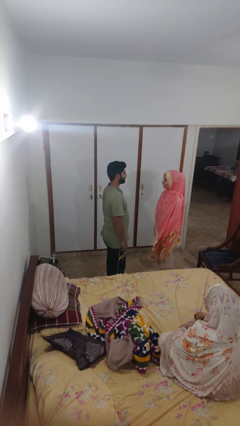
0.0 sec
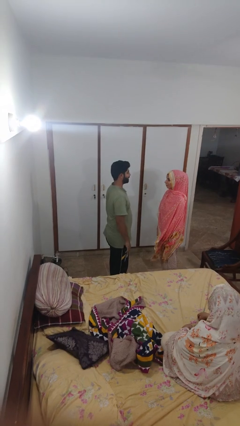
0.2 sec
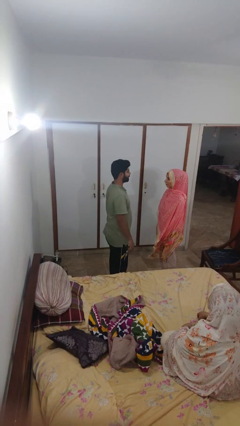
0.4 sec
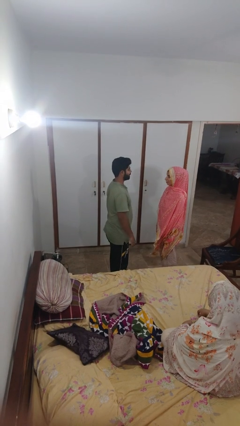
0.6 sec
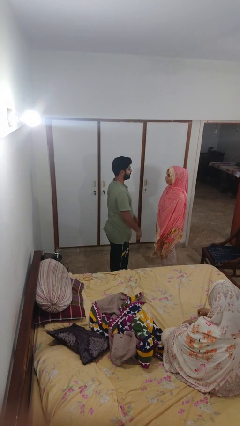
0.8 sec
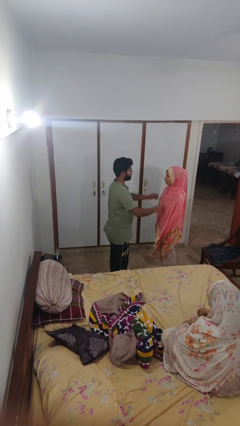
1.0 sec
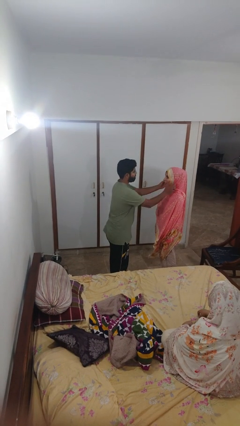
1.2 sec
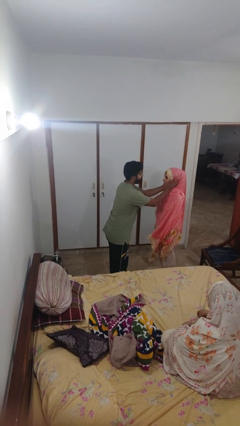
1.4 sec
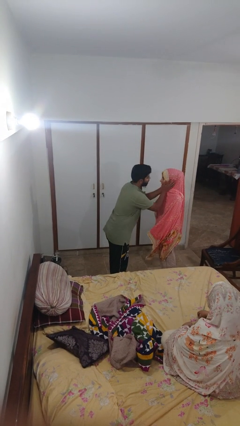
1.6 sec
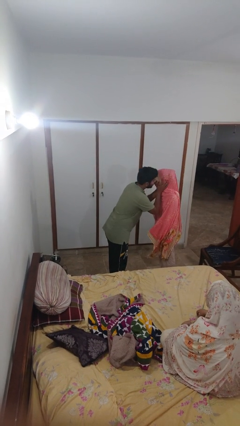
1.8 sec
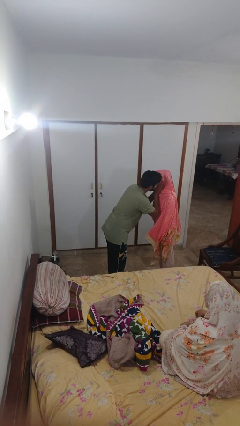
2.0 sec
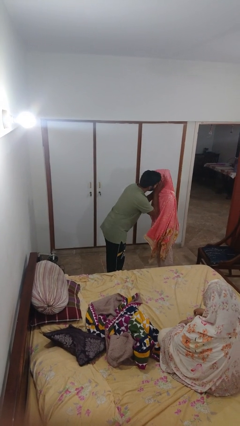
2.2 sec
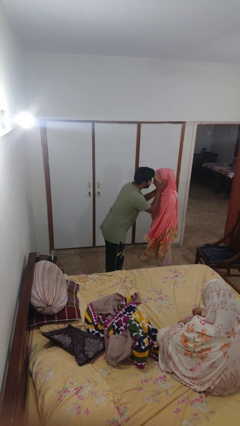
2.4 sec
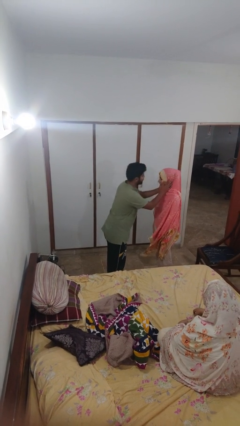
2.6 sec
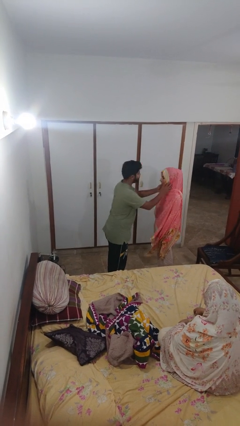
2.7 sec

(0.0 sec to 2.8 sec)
person kisses cheek of person

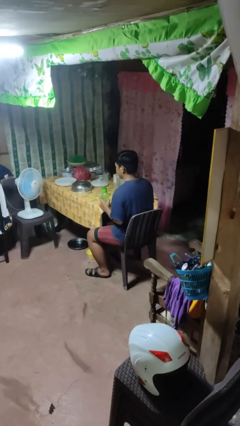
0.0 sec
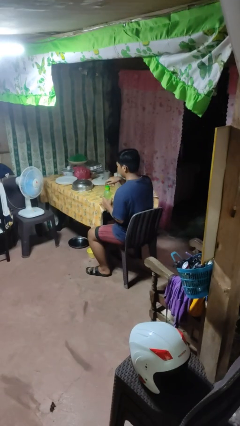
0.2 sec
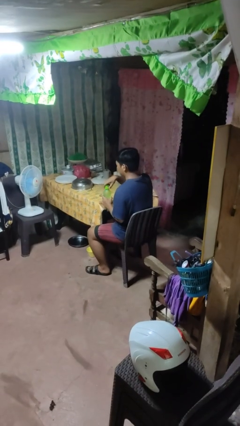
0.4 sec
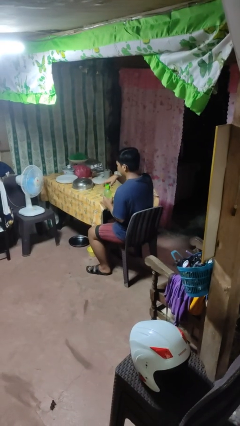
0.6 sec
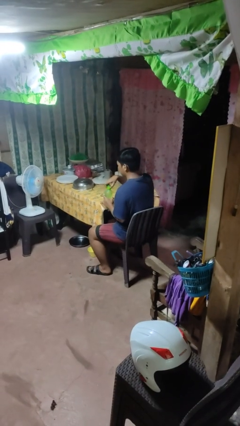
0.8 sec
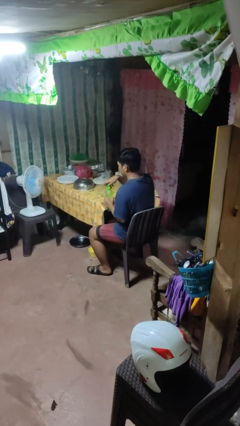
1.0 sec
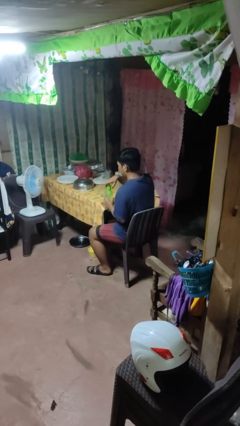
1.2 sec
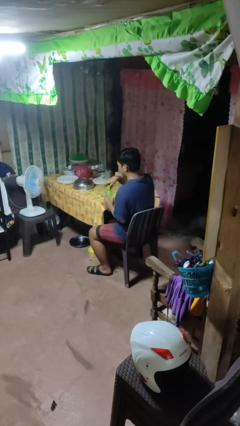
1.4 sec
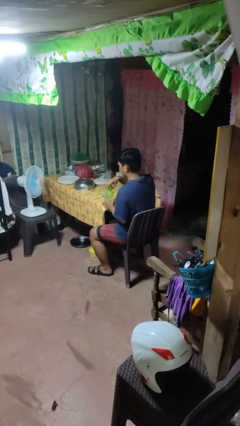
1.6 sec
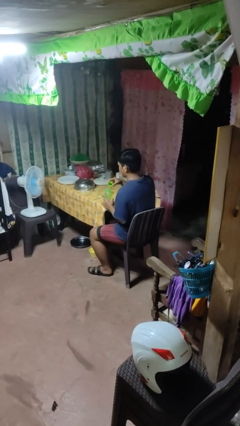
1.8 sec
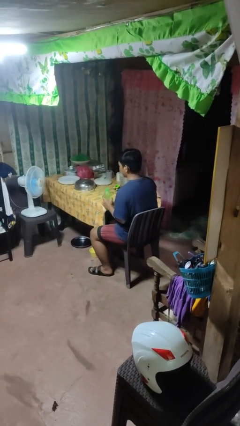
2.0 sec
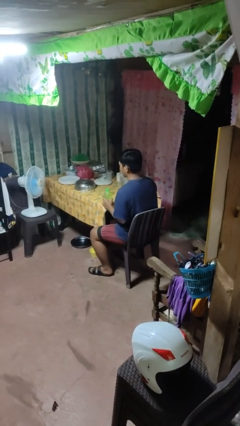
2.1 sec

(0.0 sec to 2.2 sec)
person unscrews lid from bottle

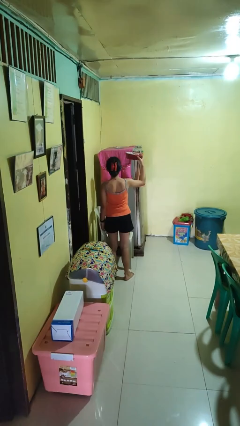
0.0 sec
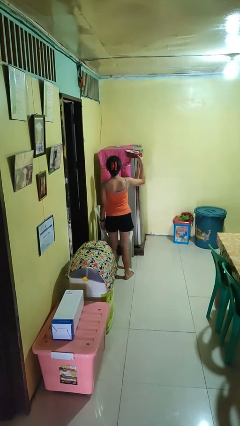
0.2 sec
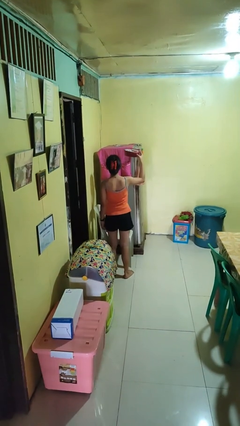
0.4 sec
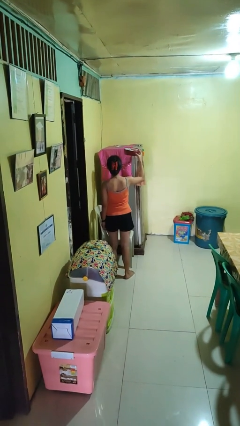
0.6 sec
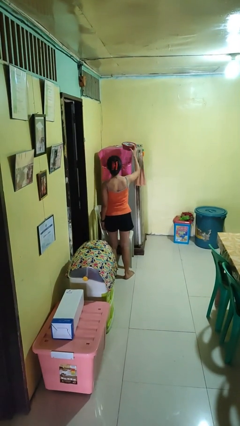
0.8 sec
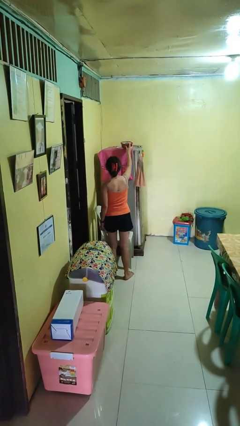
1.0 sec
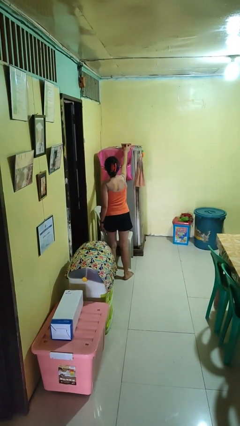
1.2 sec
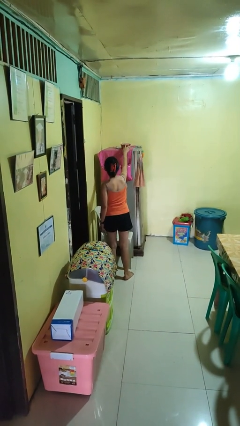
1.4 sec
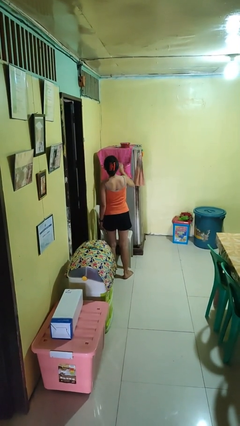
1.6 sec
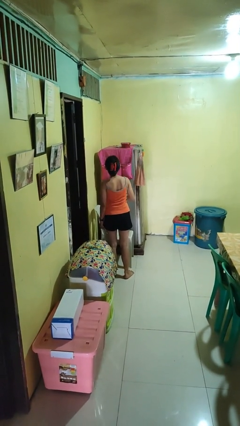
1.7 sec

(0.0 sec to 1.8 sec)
person puts down object on shelf

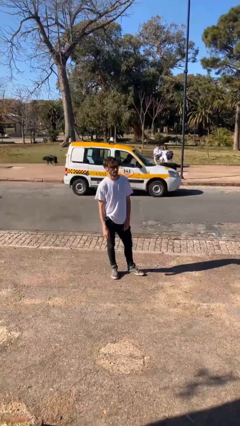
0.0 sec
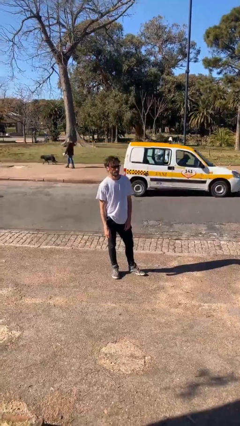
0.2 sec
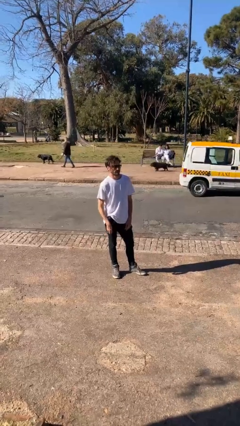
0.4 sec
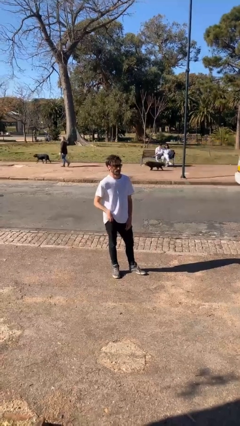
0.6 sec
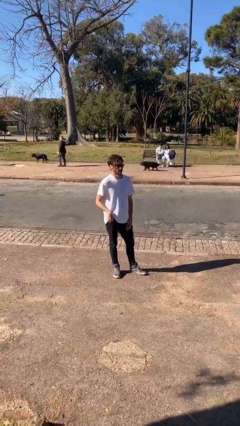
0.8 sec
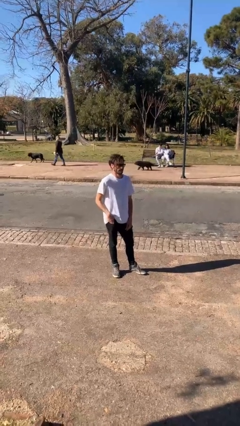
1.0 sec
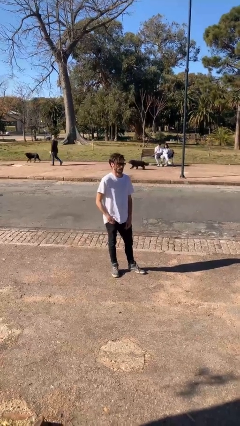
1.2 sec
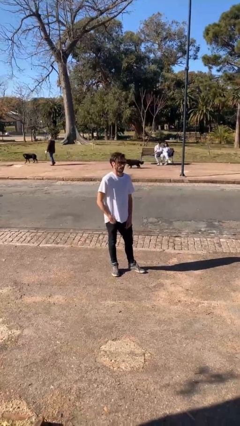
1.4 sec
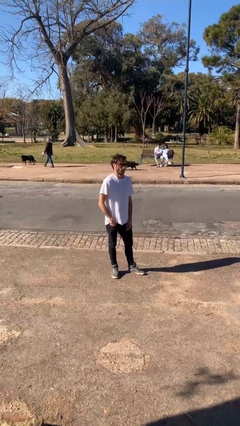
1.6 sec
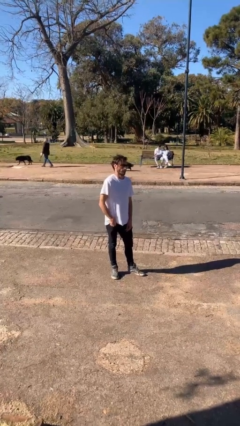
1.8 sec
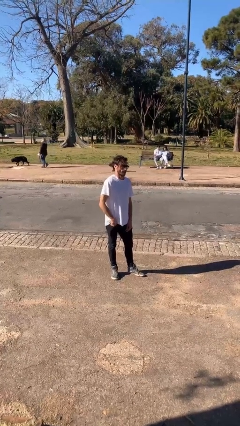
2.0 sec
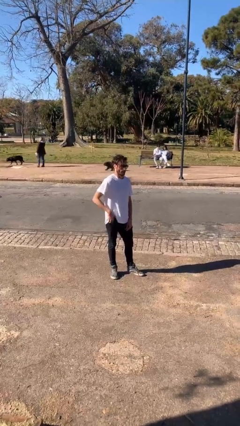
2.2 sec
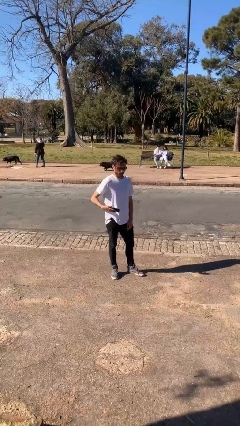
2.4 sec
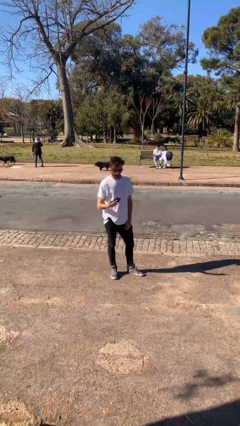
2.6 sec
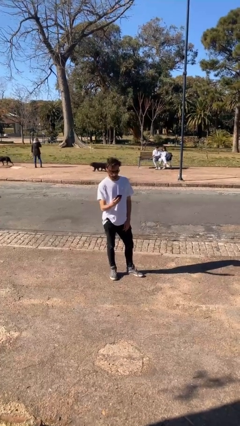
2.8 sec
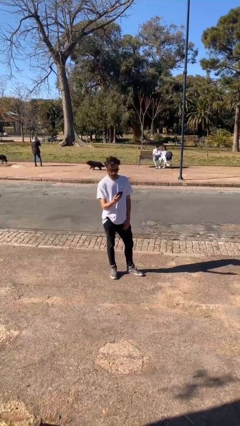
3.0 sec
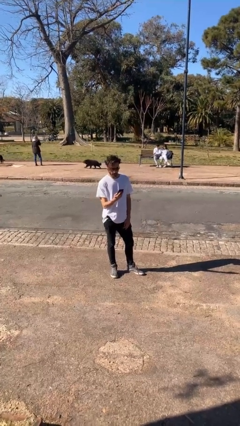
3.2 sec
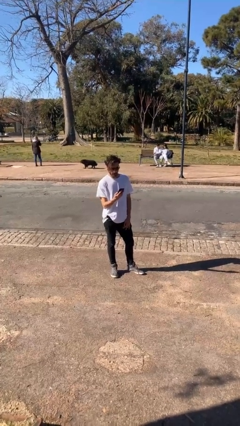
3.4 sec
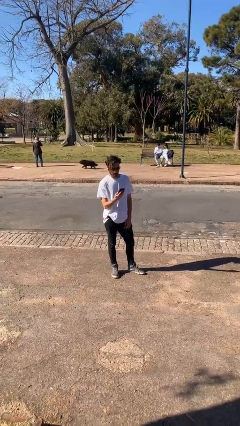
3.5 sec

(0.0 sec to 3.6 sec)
person takes phone from pocket

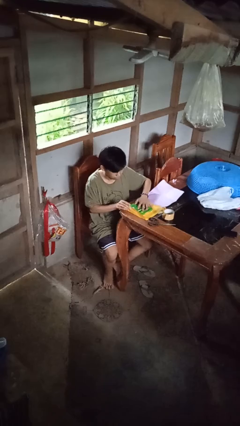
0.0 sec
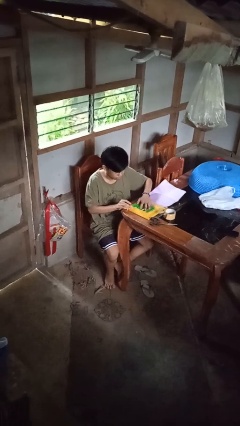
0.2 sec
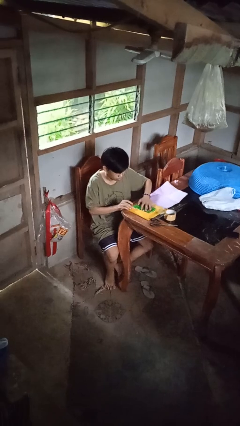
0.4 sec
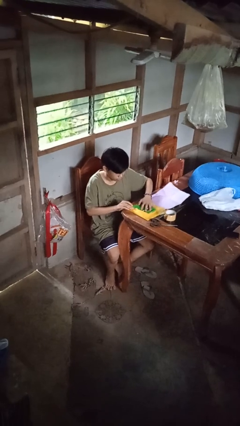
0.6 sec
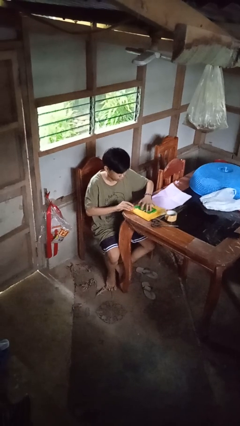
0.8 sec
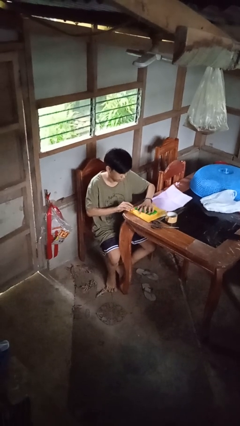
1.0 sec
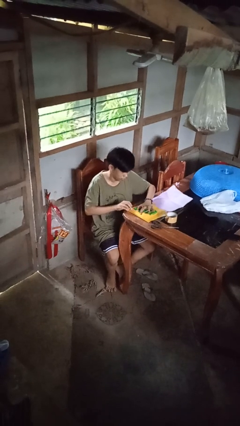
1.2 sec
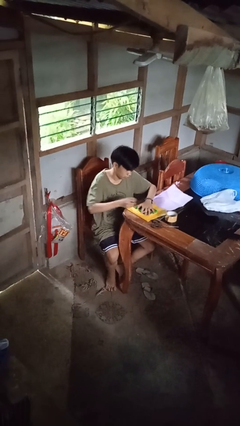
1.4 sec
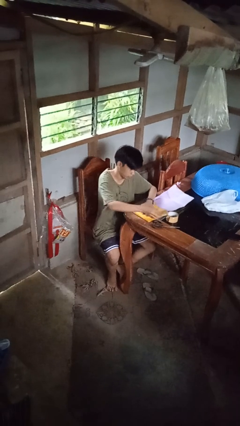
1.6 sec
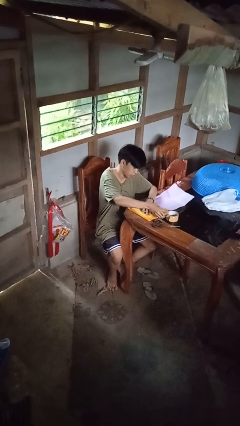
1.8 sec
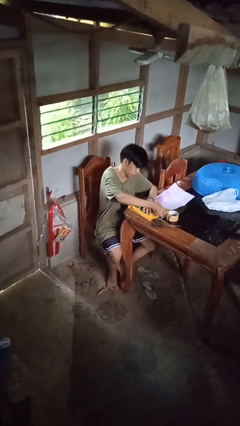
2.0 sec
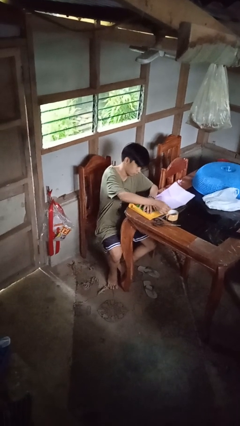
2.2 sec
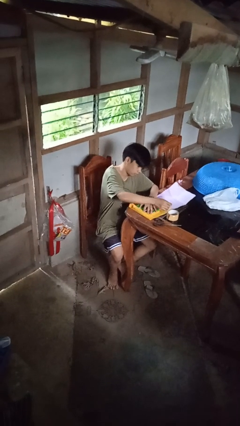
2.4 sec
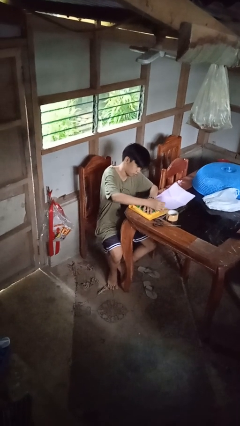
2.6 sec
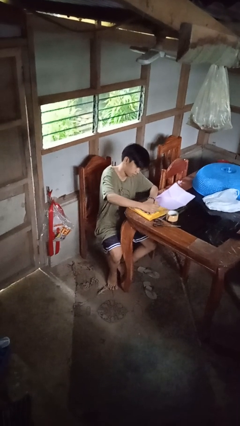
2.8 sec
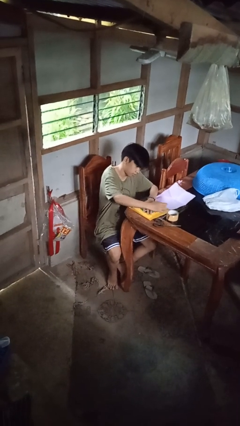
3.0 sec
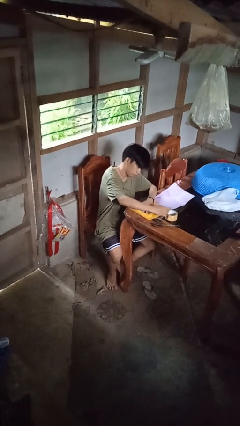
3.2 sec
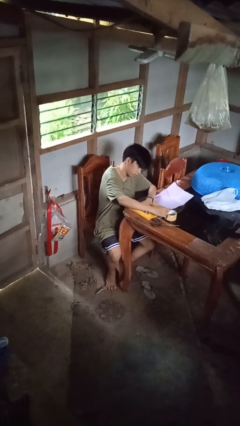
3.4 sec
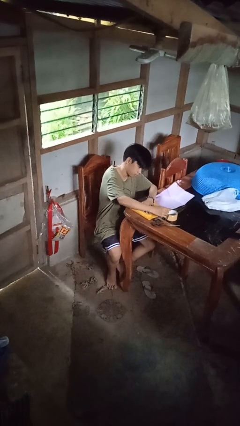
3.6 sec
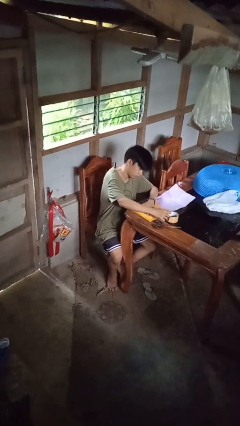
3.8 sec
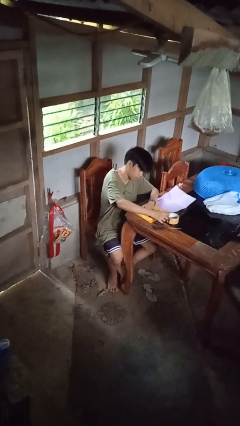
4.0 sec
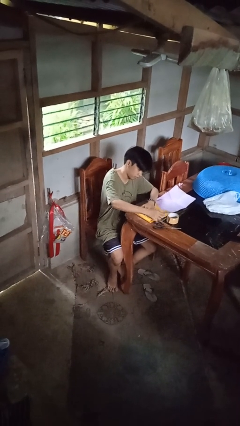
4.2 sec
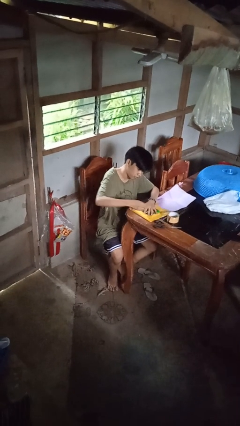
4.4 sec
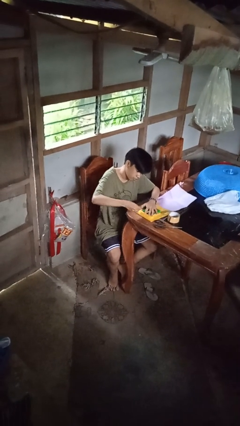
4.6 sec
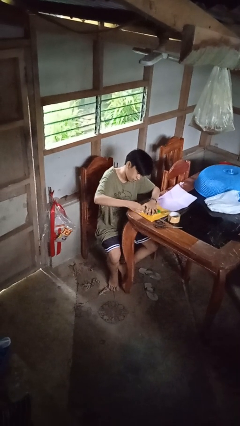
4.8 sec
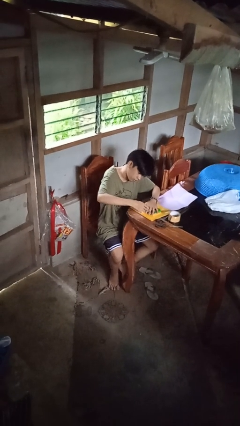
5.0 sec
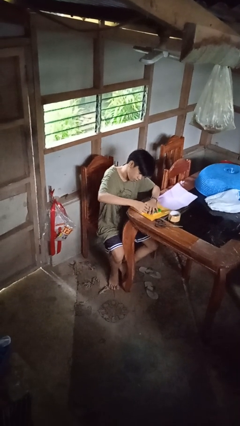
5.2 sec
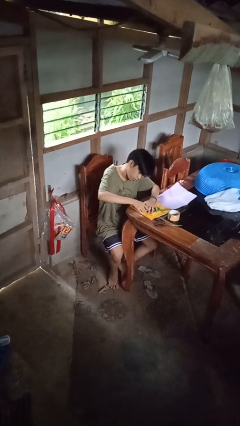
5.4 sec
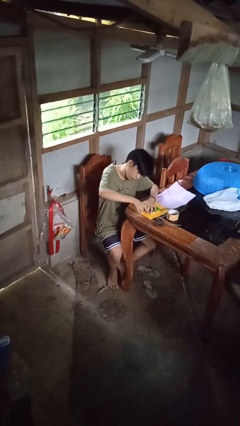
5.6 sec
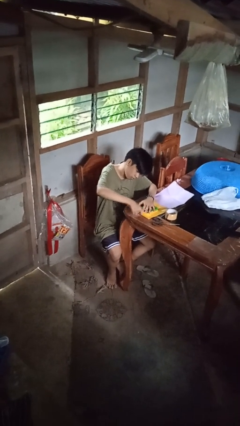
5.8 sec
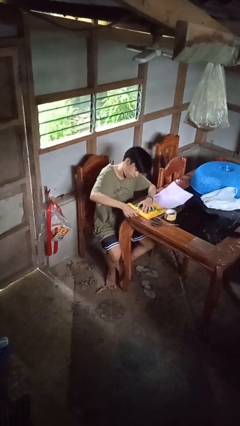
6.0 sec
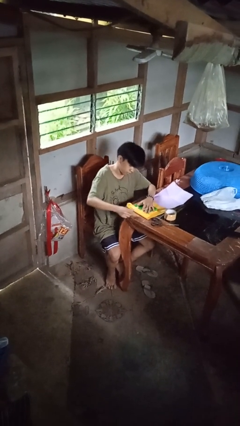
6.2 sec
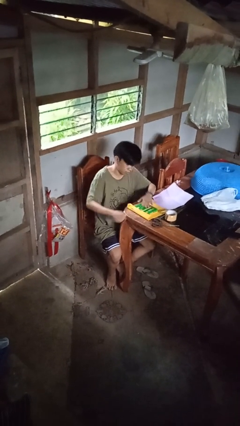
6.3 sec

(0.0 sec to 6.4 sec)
person wraps box

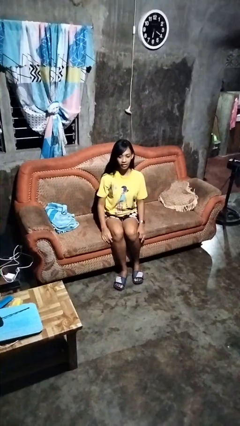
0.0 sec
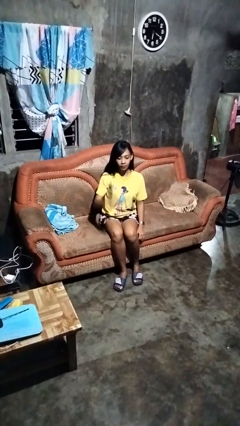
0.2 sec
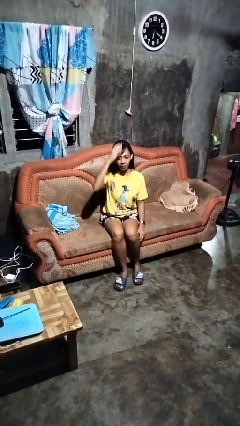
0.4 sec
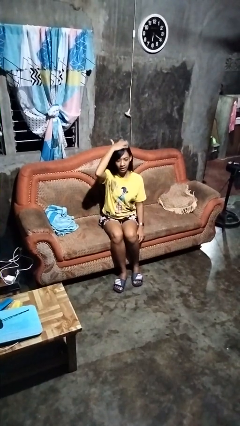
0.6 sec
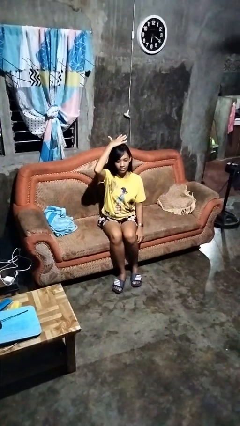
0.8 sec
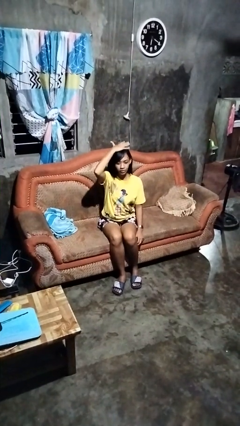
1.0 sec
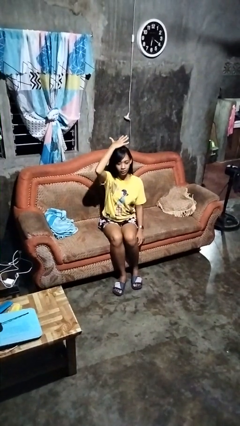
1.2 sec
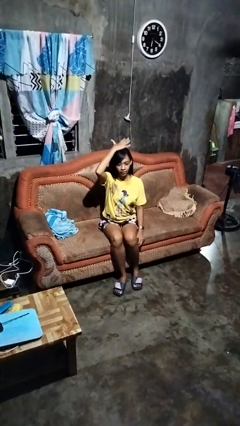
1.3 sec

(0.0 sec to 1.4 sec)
person pats head
